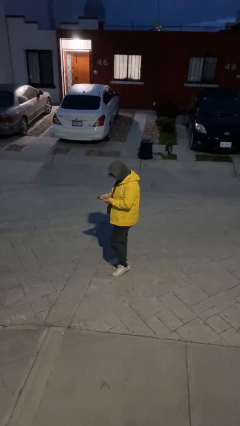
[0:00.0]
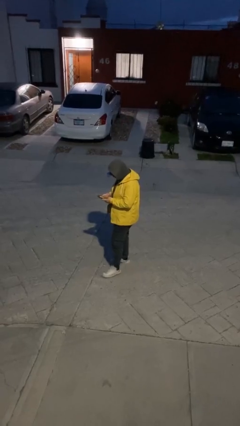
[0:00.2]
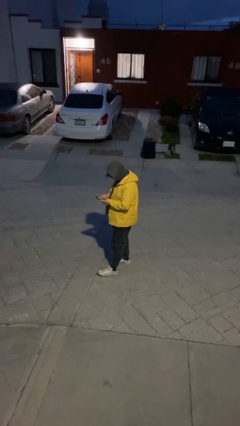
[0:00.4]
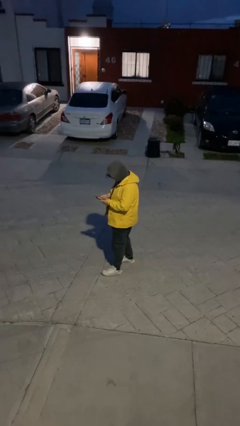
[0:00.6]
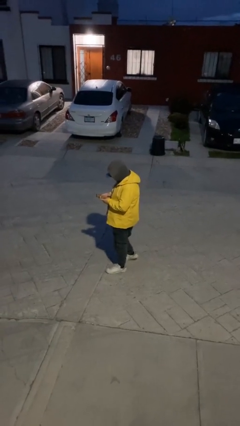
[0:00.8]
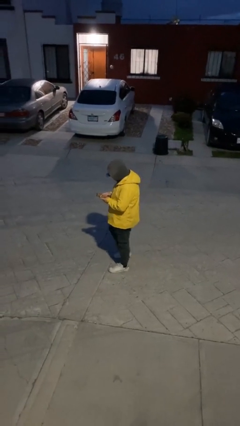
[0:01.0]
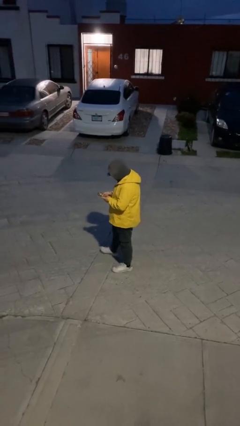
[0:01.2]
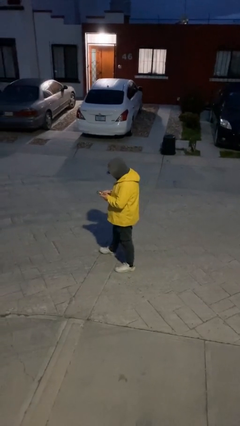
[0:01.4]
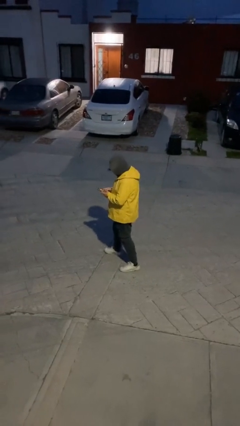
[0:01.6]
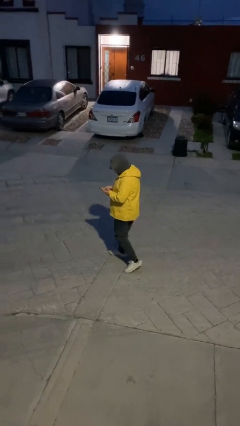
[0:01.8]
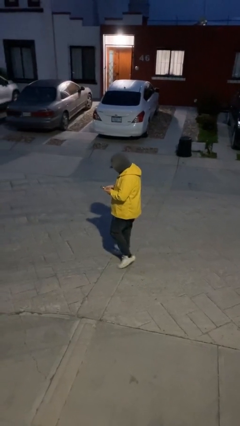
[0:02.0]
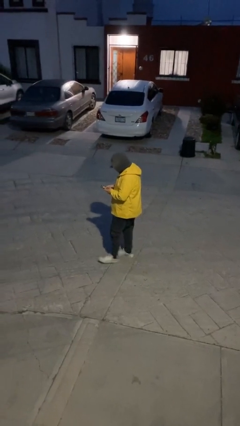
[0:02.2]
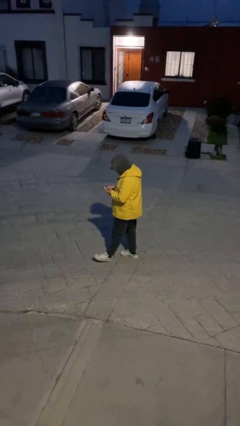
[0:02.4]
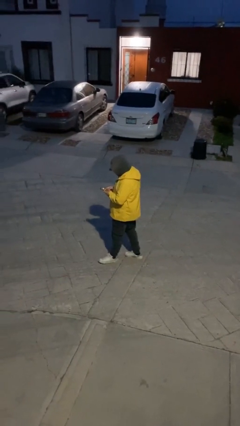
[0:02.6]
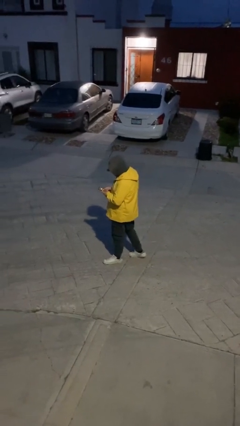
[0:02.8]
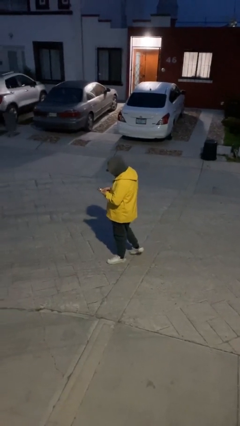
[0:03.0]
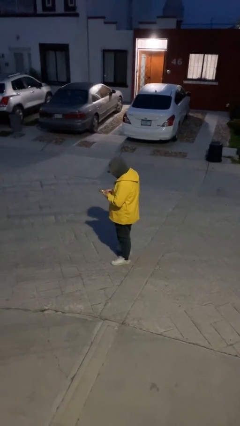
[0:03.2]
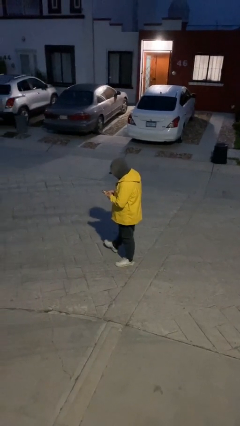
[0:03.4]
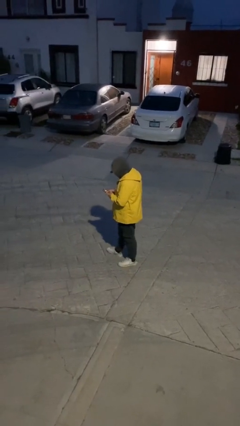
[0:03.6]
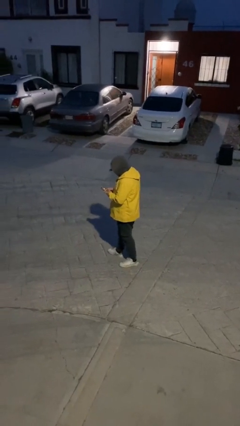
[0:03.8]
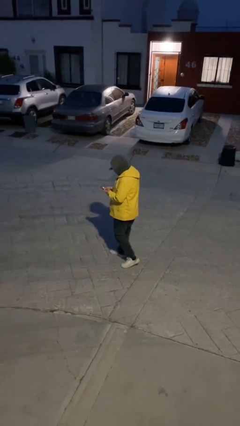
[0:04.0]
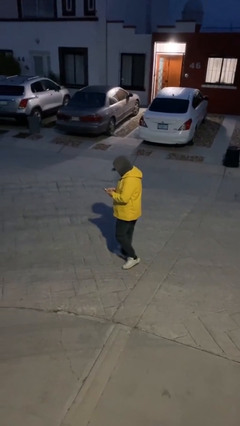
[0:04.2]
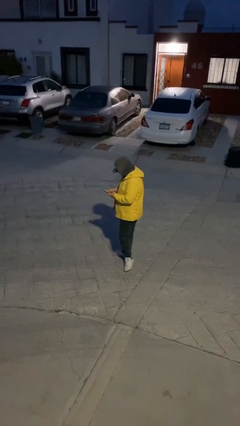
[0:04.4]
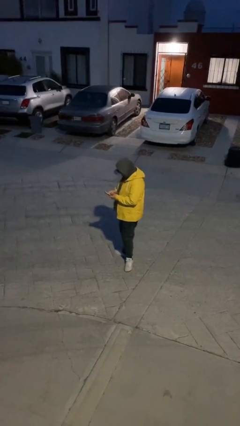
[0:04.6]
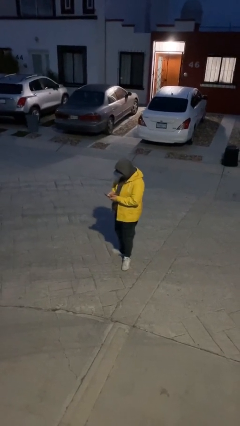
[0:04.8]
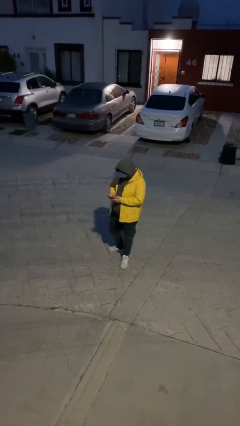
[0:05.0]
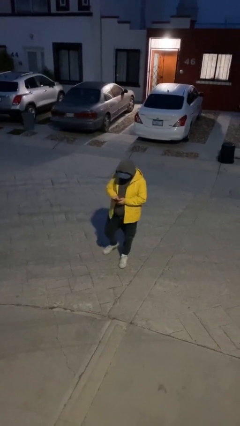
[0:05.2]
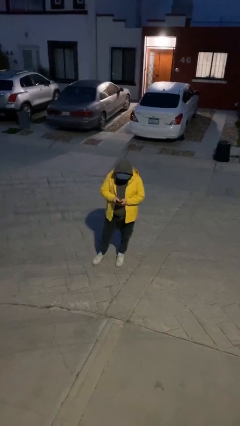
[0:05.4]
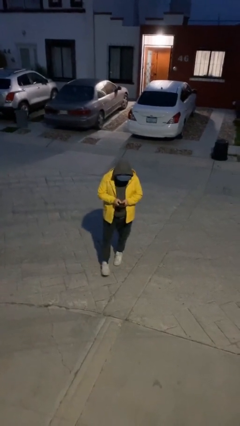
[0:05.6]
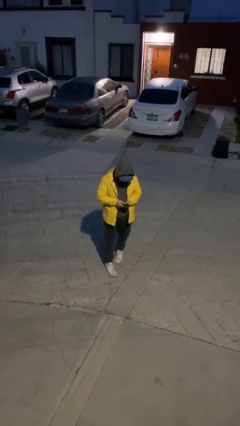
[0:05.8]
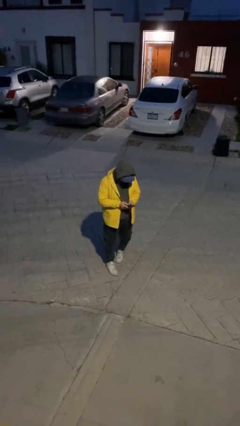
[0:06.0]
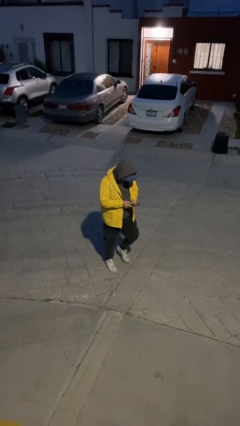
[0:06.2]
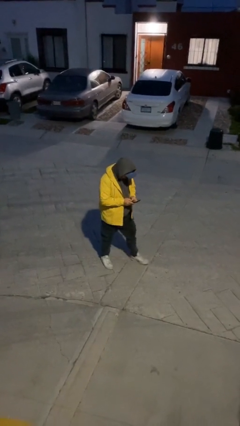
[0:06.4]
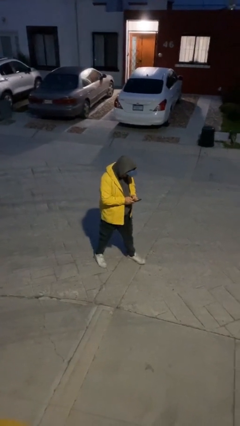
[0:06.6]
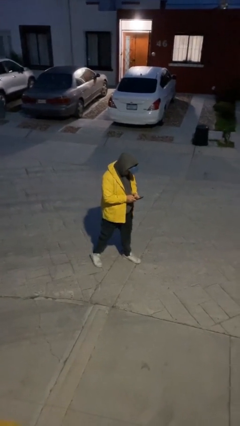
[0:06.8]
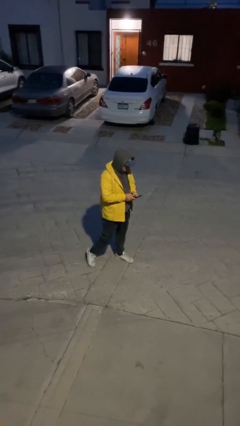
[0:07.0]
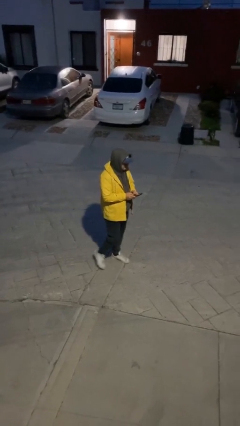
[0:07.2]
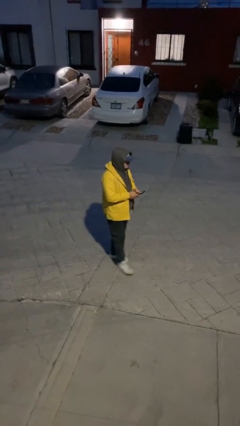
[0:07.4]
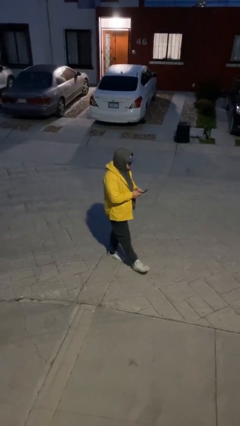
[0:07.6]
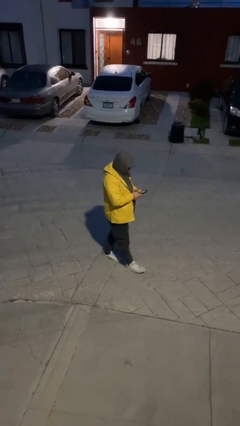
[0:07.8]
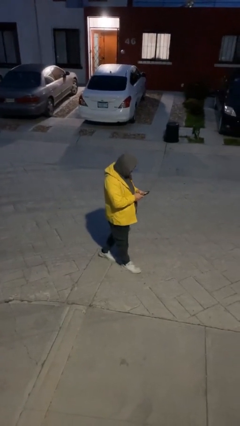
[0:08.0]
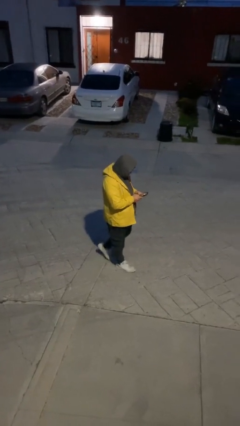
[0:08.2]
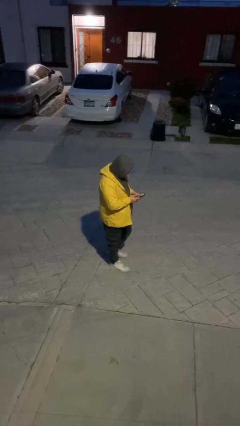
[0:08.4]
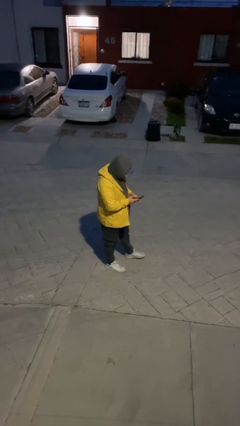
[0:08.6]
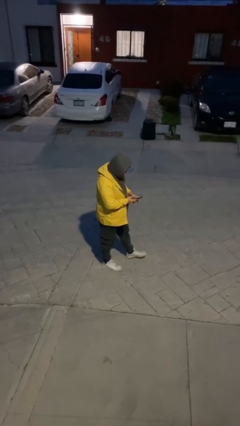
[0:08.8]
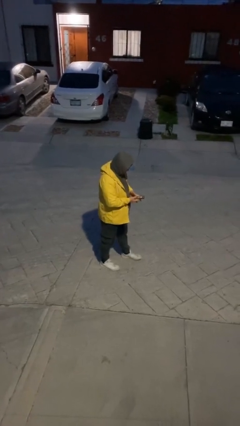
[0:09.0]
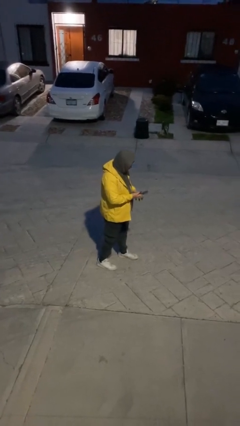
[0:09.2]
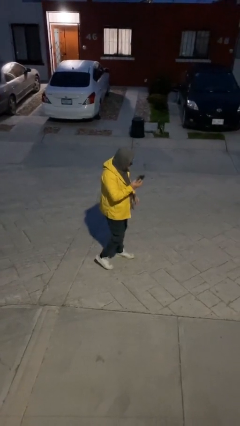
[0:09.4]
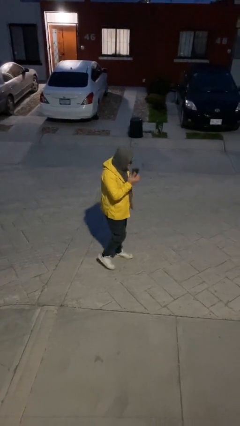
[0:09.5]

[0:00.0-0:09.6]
person texts on phone

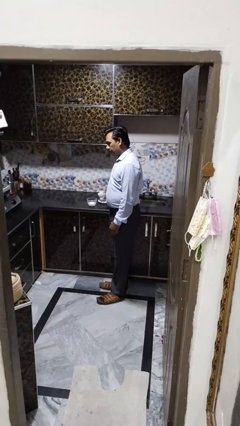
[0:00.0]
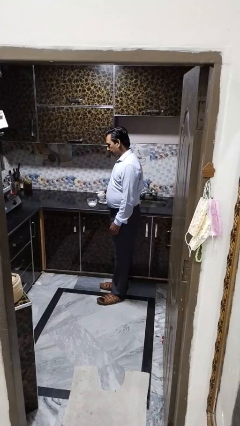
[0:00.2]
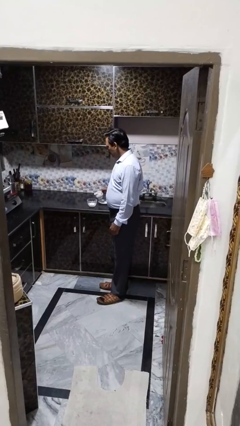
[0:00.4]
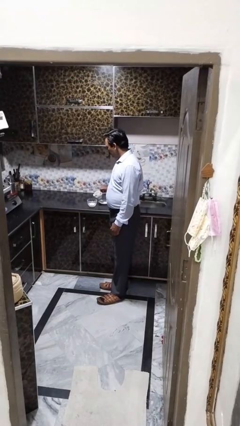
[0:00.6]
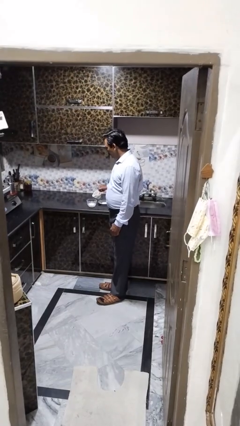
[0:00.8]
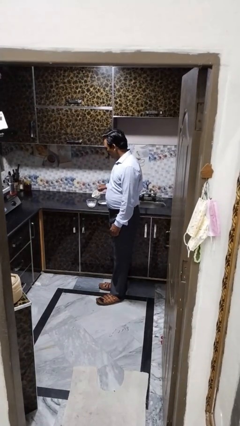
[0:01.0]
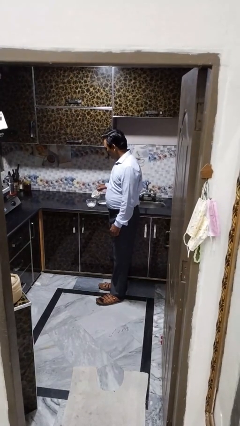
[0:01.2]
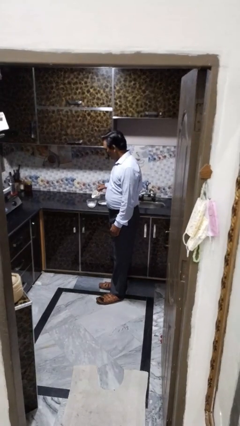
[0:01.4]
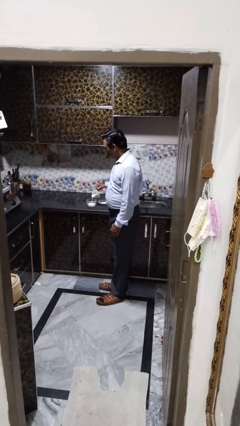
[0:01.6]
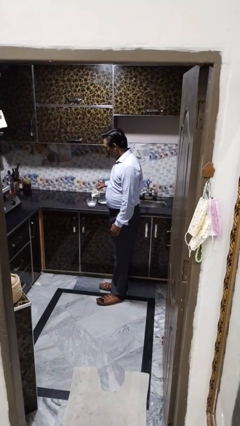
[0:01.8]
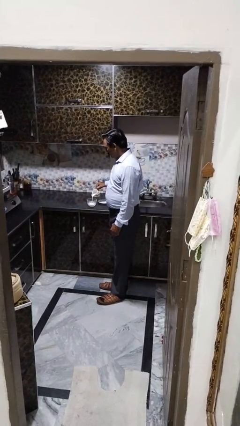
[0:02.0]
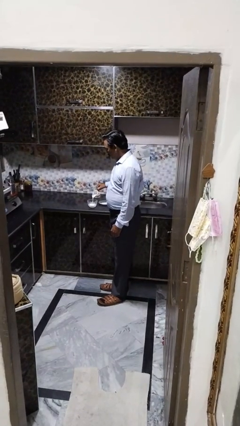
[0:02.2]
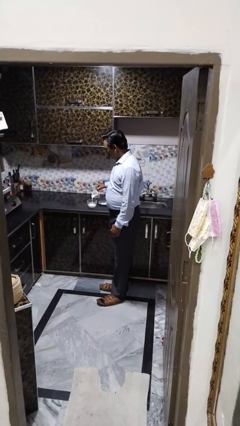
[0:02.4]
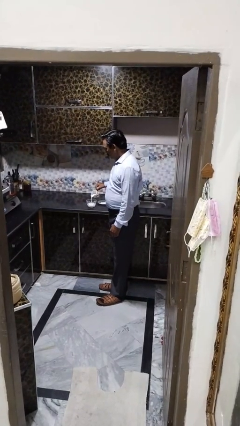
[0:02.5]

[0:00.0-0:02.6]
person pours into bowl

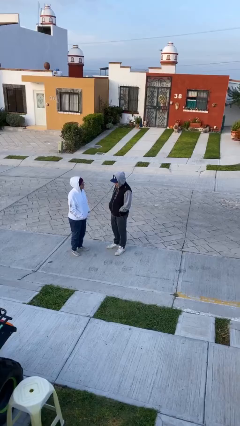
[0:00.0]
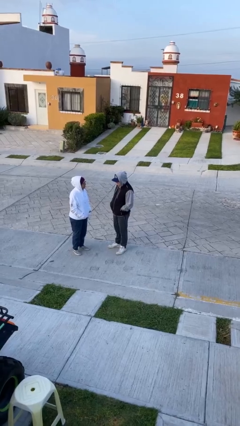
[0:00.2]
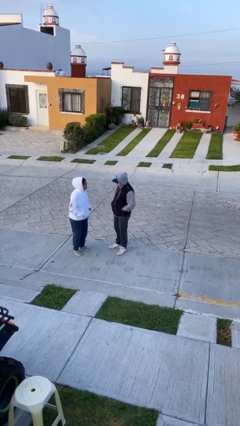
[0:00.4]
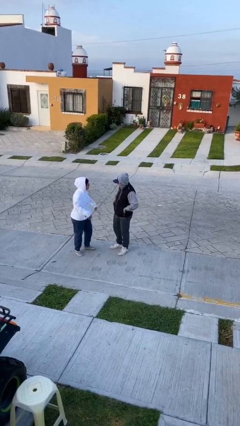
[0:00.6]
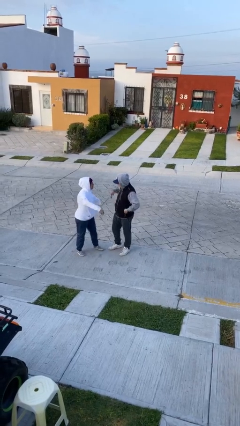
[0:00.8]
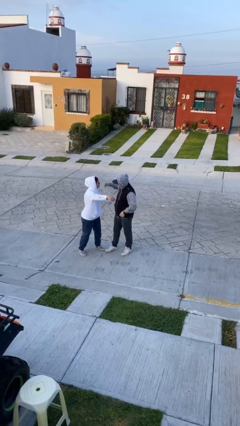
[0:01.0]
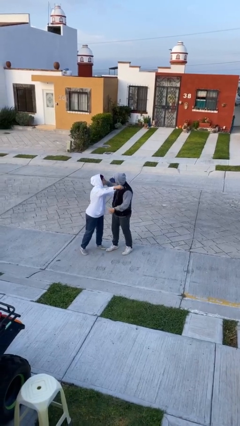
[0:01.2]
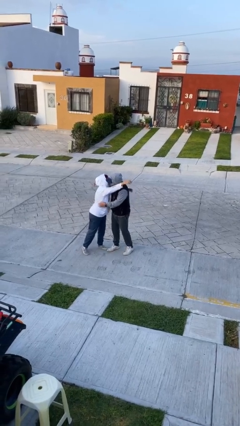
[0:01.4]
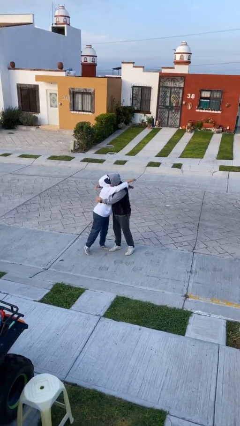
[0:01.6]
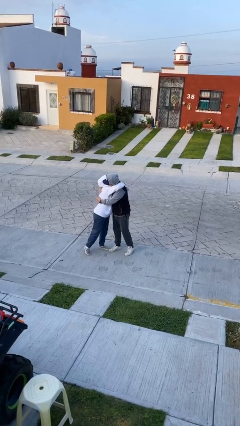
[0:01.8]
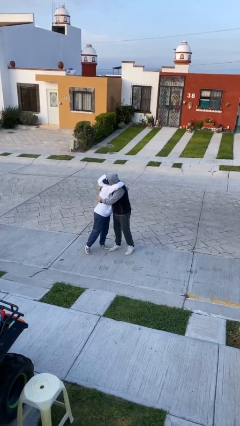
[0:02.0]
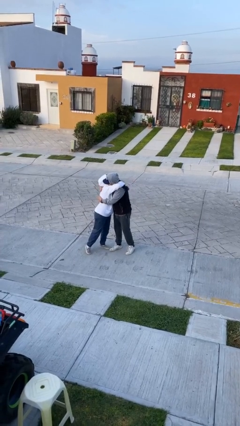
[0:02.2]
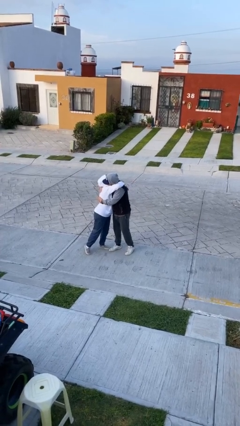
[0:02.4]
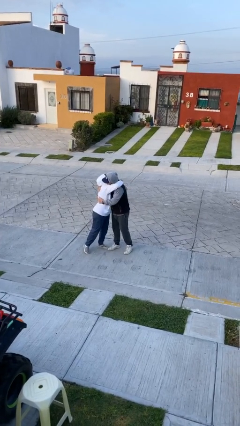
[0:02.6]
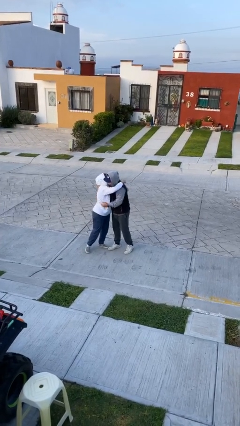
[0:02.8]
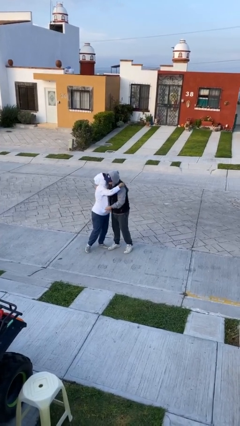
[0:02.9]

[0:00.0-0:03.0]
person embraces person

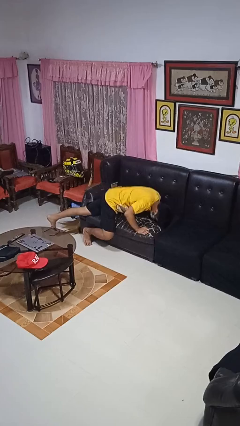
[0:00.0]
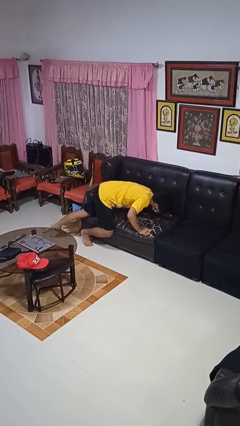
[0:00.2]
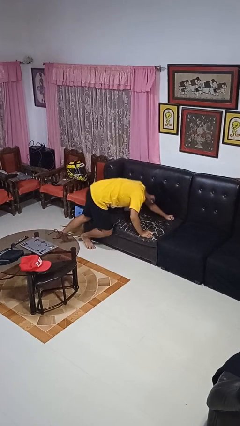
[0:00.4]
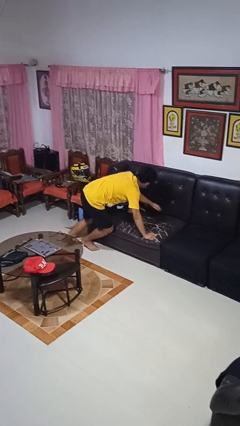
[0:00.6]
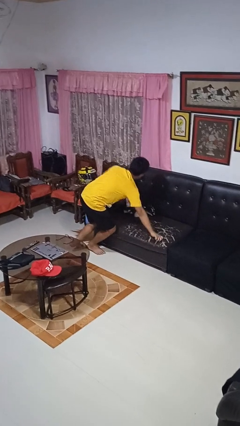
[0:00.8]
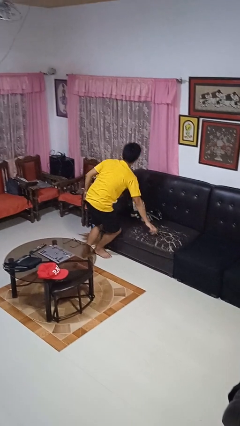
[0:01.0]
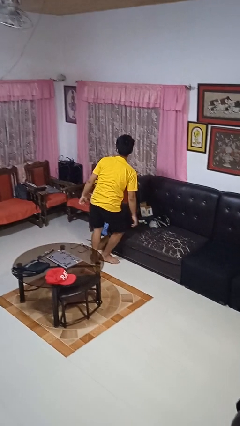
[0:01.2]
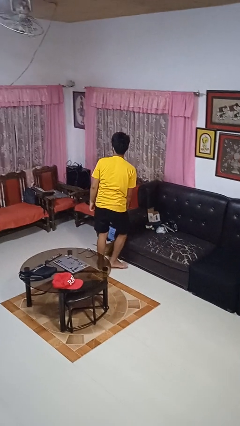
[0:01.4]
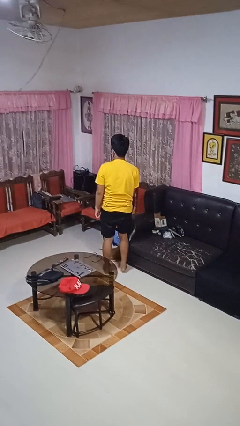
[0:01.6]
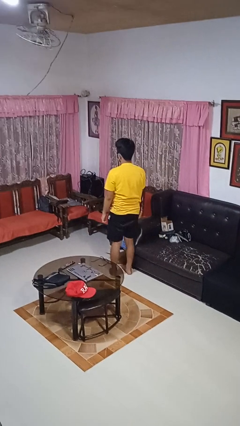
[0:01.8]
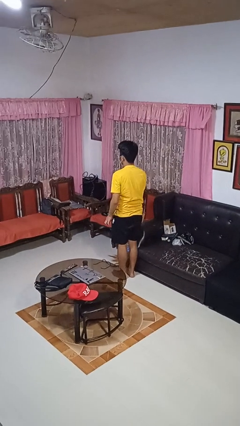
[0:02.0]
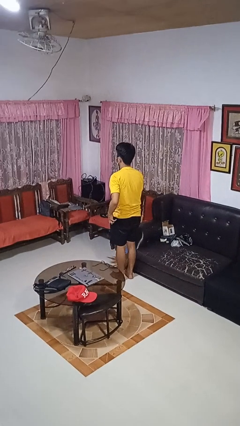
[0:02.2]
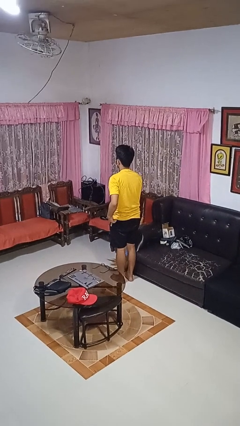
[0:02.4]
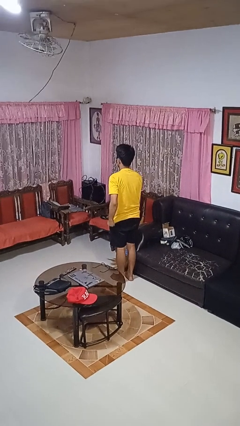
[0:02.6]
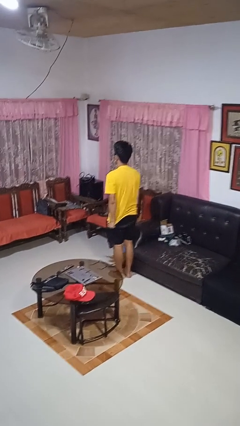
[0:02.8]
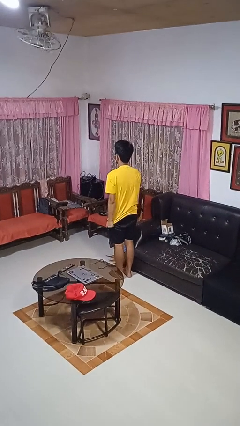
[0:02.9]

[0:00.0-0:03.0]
person stands up
